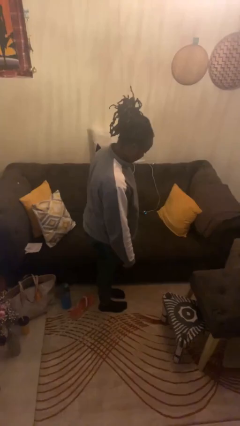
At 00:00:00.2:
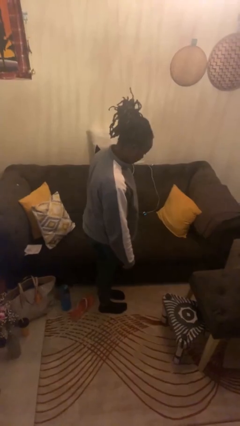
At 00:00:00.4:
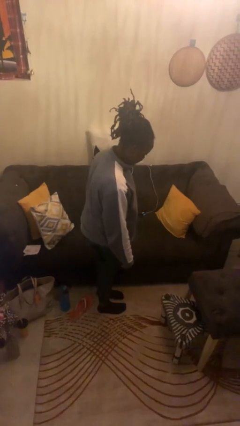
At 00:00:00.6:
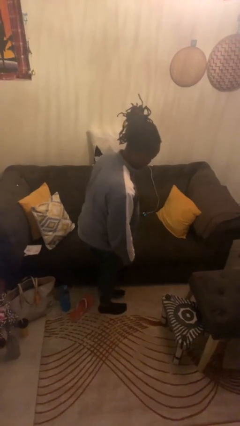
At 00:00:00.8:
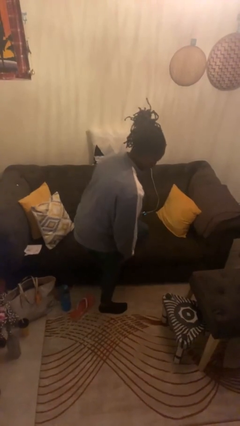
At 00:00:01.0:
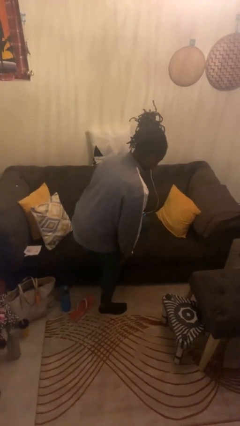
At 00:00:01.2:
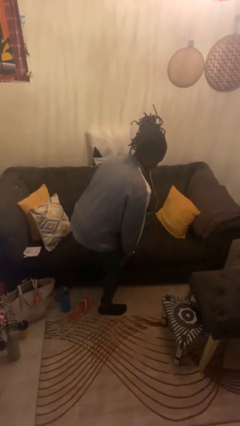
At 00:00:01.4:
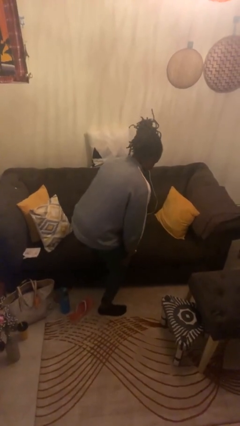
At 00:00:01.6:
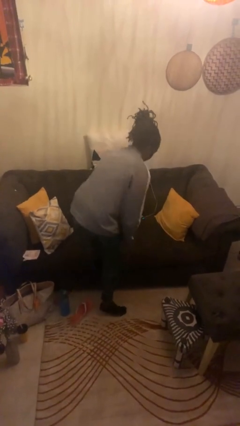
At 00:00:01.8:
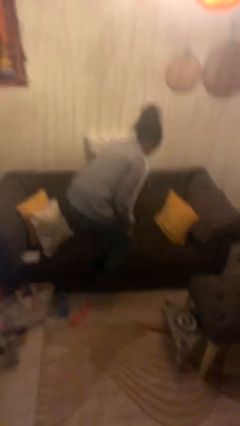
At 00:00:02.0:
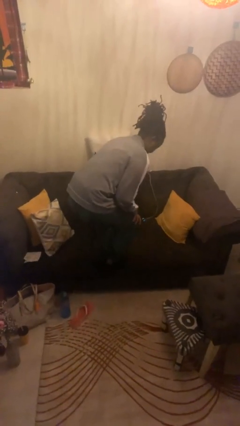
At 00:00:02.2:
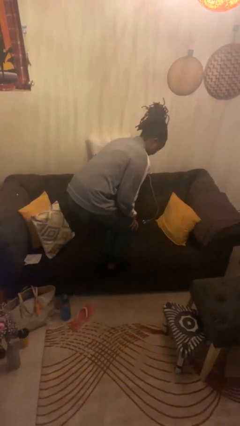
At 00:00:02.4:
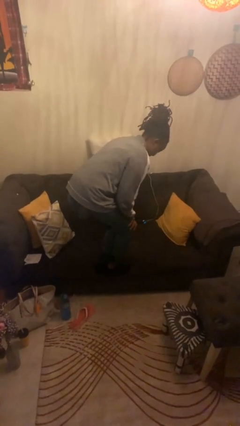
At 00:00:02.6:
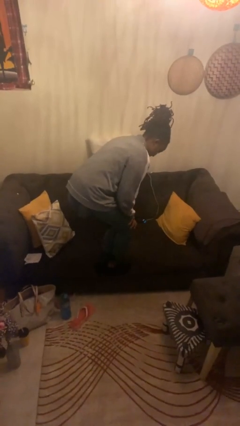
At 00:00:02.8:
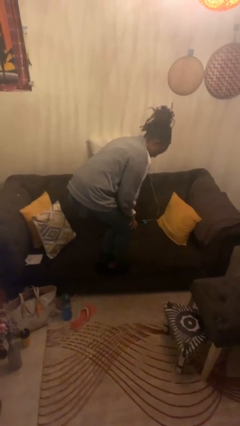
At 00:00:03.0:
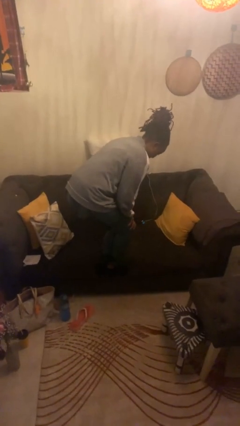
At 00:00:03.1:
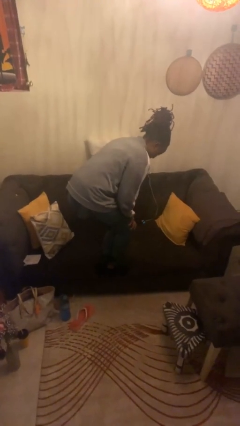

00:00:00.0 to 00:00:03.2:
person climbs on chair

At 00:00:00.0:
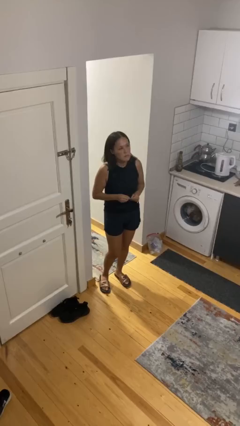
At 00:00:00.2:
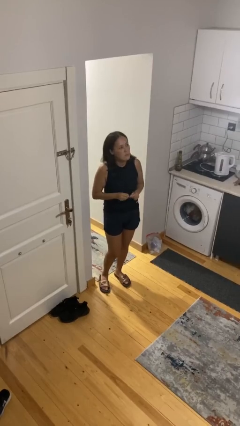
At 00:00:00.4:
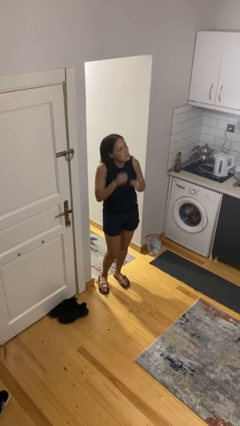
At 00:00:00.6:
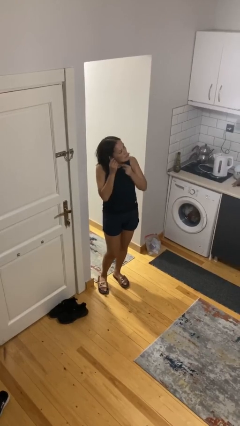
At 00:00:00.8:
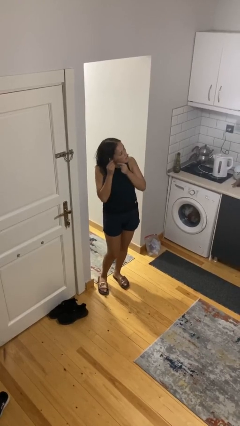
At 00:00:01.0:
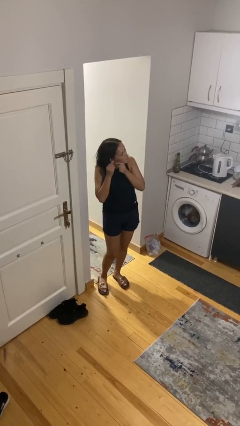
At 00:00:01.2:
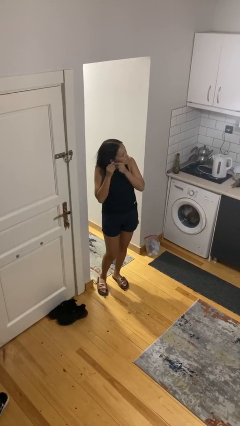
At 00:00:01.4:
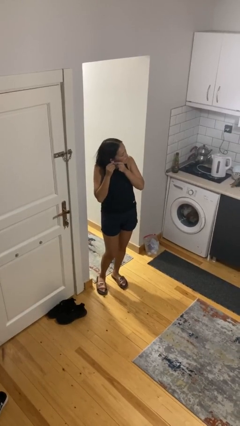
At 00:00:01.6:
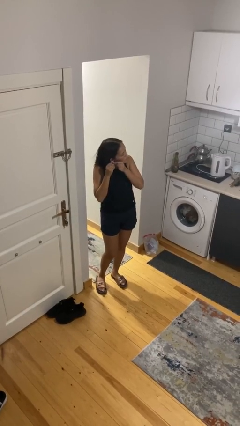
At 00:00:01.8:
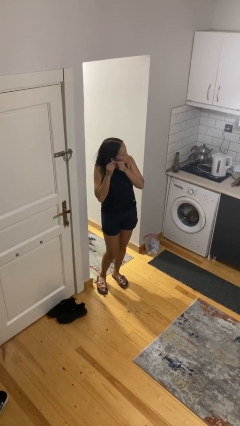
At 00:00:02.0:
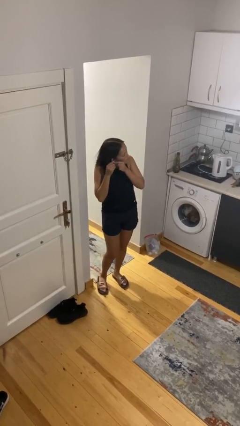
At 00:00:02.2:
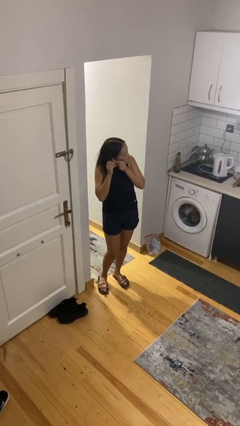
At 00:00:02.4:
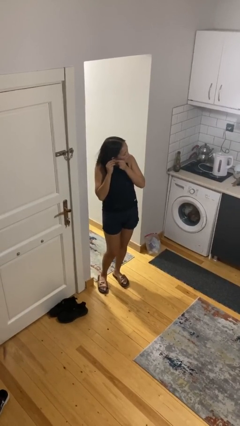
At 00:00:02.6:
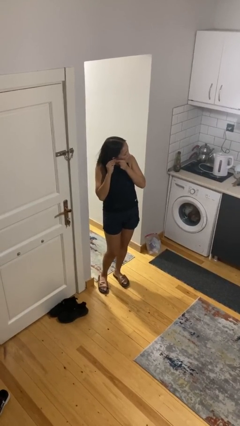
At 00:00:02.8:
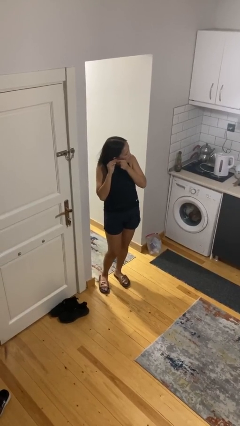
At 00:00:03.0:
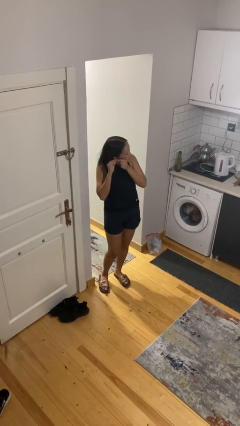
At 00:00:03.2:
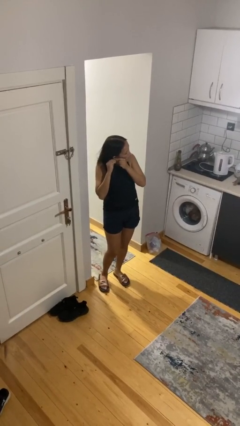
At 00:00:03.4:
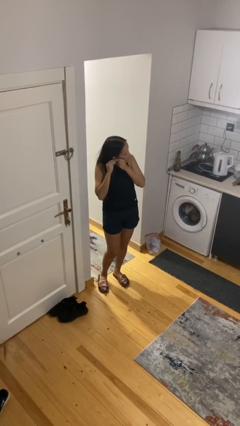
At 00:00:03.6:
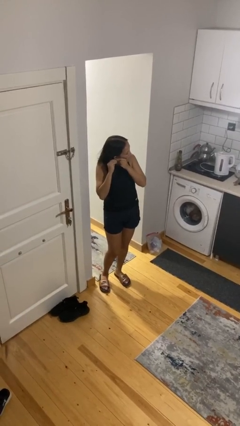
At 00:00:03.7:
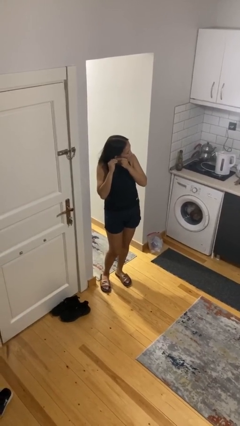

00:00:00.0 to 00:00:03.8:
person puts on earrings

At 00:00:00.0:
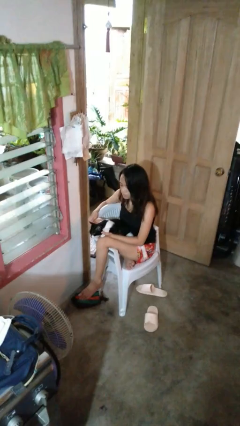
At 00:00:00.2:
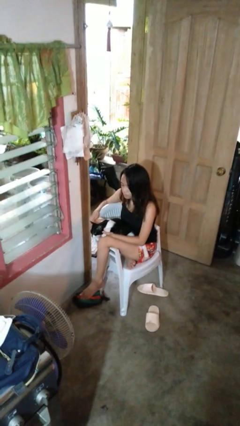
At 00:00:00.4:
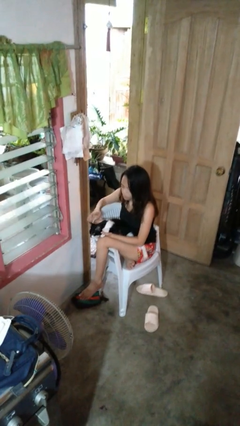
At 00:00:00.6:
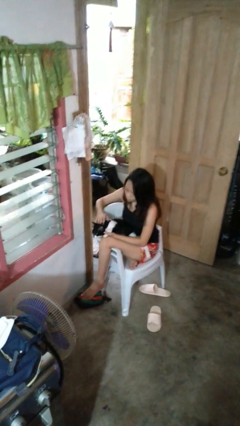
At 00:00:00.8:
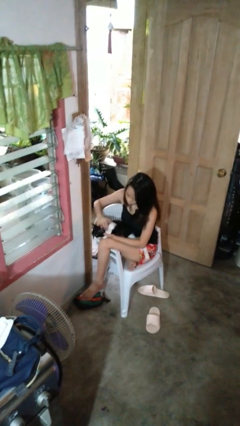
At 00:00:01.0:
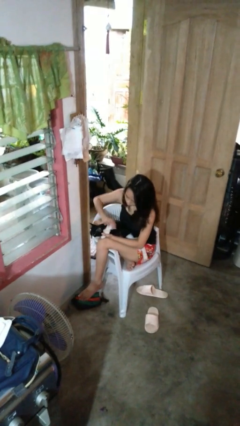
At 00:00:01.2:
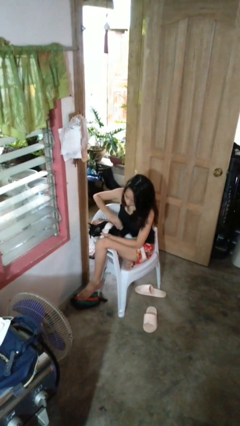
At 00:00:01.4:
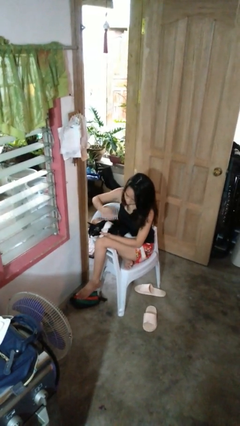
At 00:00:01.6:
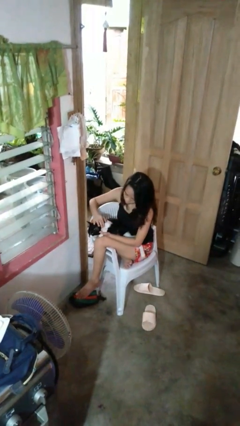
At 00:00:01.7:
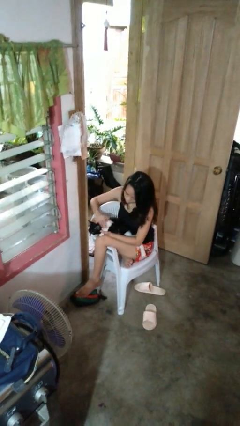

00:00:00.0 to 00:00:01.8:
person pets cat

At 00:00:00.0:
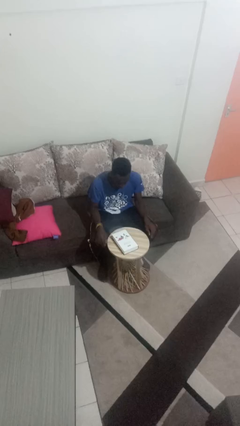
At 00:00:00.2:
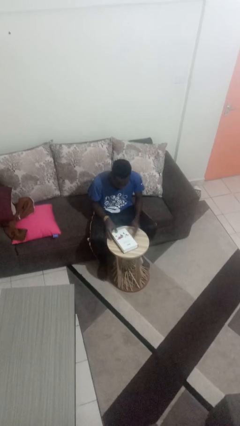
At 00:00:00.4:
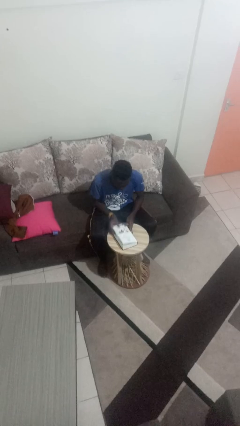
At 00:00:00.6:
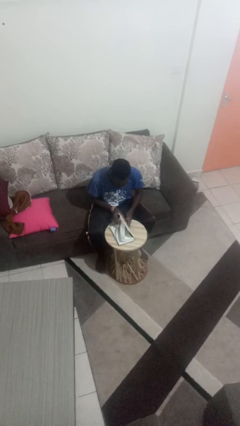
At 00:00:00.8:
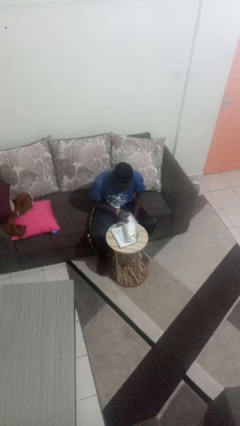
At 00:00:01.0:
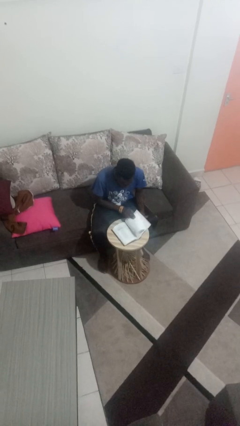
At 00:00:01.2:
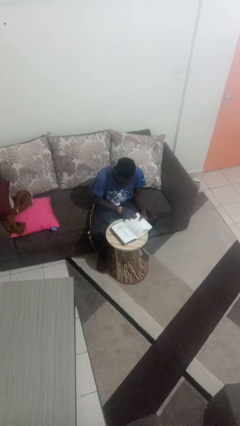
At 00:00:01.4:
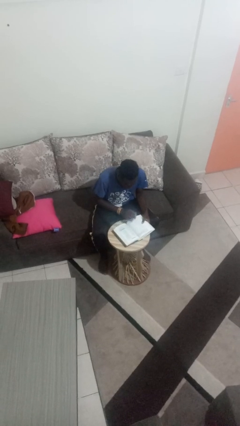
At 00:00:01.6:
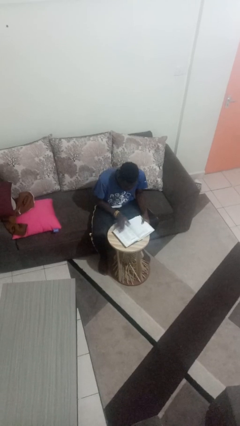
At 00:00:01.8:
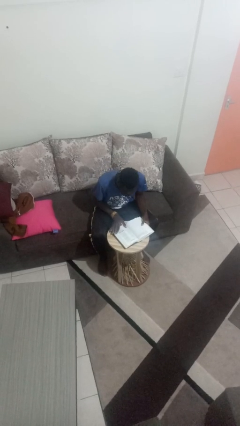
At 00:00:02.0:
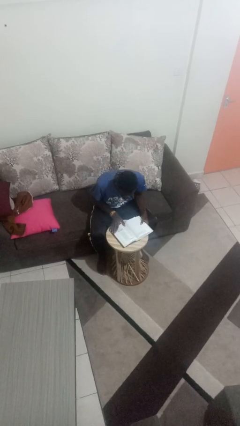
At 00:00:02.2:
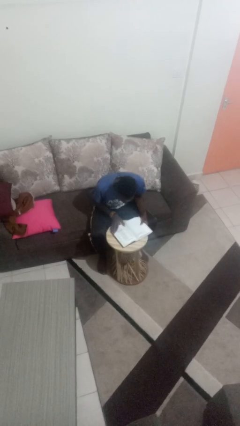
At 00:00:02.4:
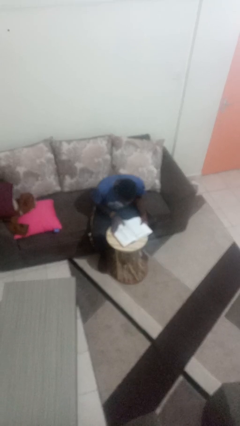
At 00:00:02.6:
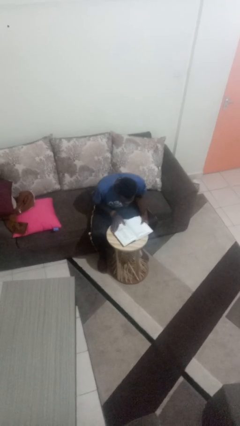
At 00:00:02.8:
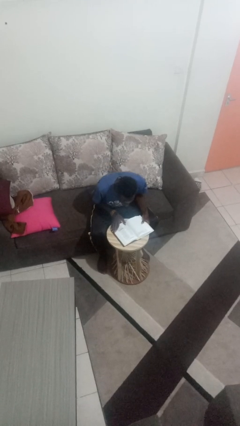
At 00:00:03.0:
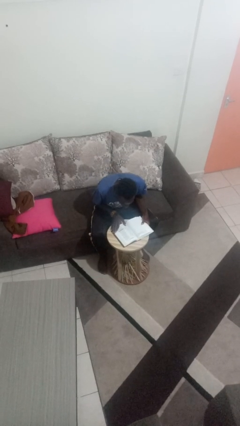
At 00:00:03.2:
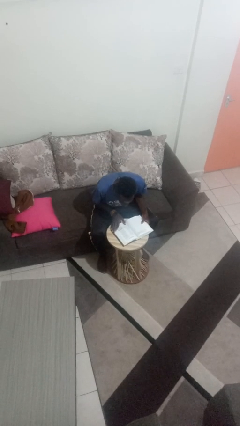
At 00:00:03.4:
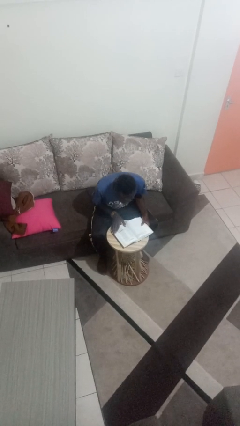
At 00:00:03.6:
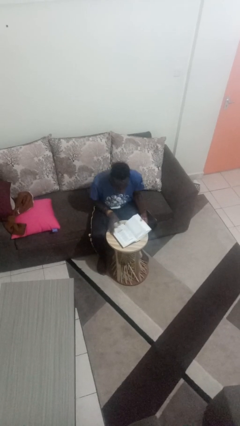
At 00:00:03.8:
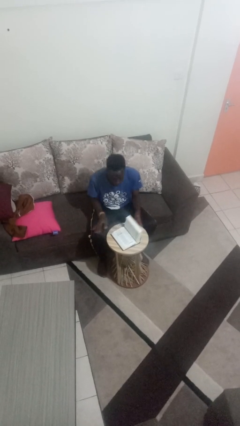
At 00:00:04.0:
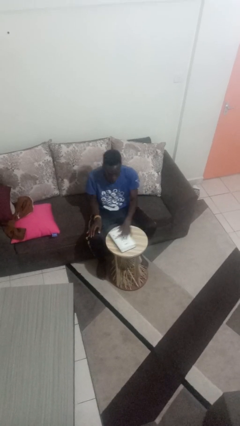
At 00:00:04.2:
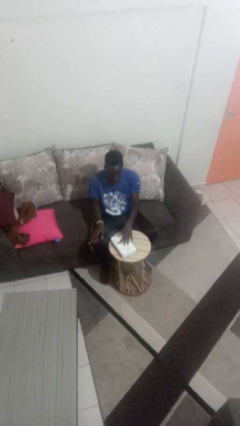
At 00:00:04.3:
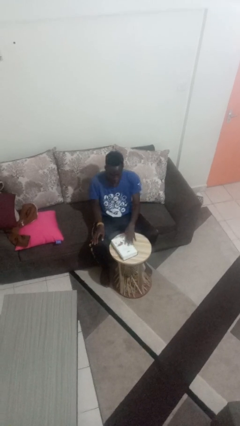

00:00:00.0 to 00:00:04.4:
person reads book

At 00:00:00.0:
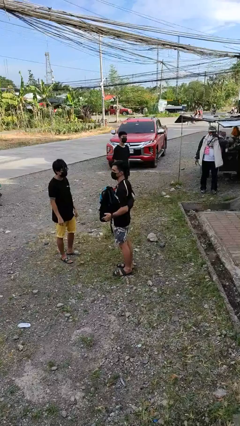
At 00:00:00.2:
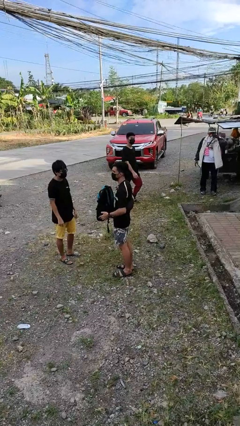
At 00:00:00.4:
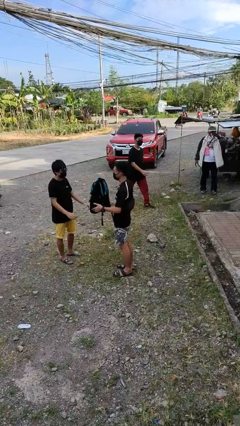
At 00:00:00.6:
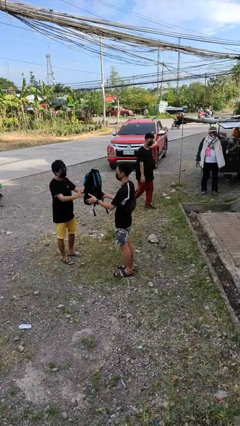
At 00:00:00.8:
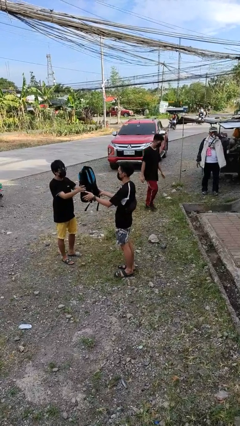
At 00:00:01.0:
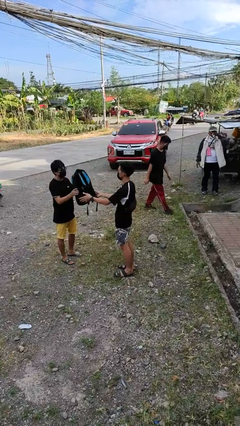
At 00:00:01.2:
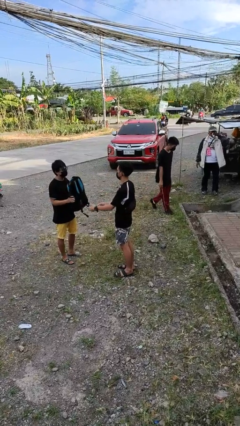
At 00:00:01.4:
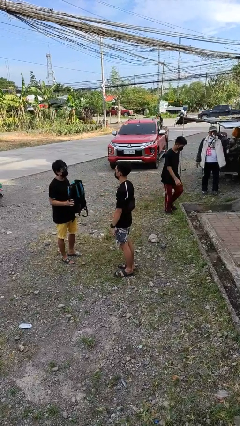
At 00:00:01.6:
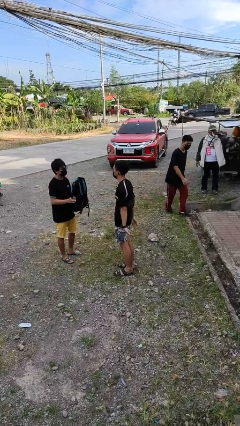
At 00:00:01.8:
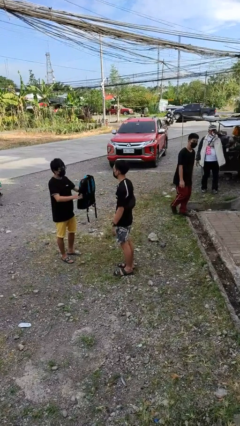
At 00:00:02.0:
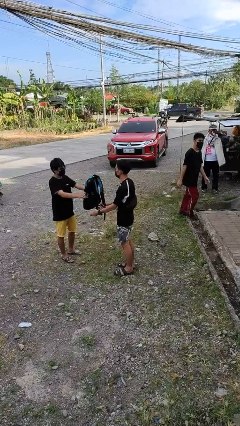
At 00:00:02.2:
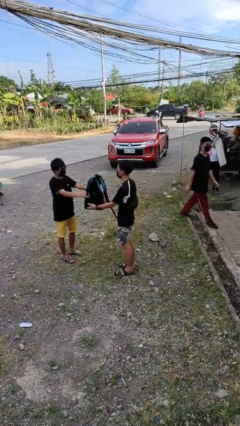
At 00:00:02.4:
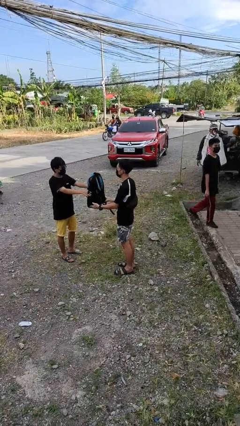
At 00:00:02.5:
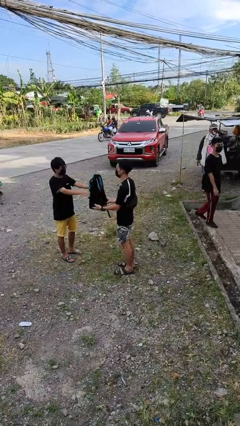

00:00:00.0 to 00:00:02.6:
person transfers object to person

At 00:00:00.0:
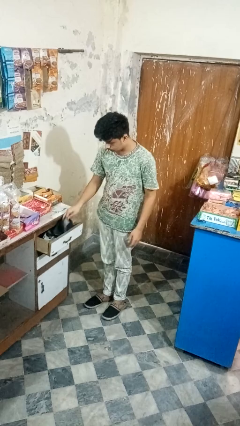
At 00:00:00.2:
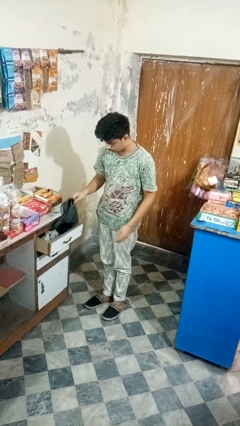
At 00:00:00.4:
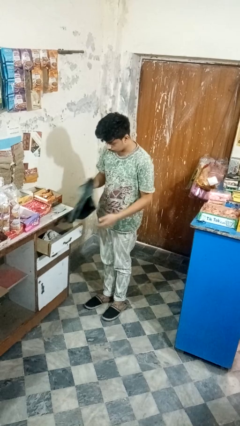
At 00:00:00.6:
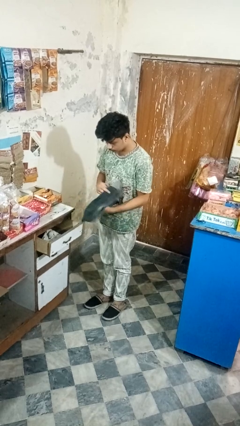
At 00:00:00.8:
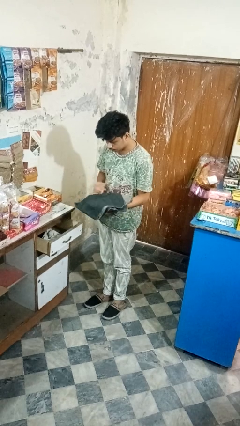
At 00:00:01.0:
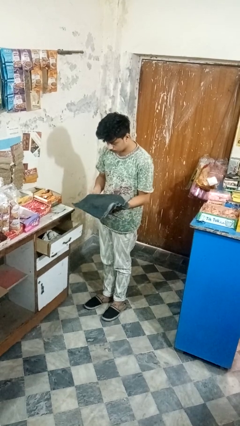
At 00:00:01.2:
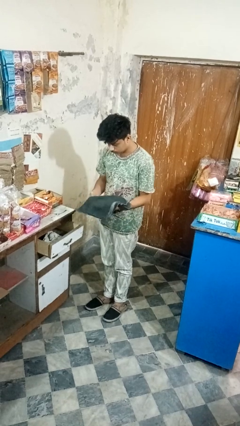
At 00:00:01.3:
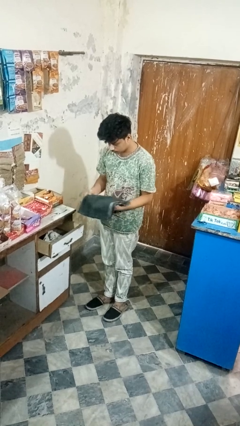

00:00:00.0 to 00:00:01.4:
person takes clothes from dresser

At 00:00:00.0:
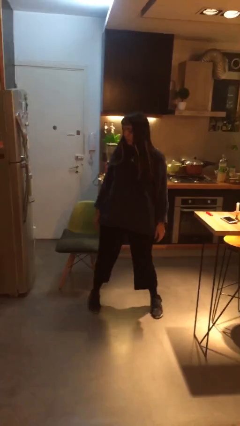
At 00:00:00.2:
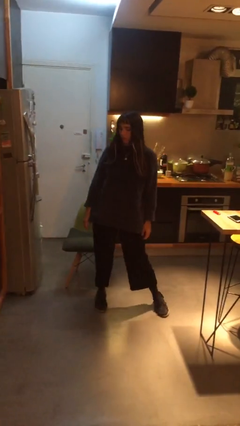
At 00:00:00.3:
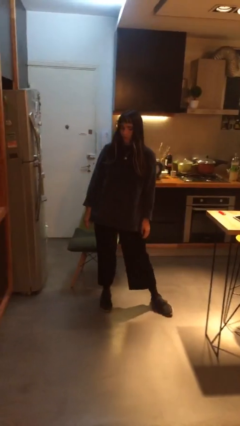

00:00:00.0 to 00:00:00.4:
person sits down
